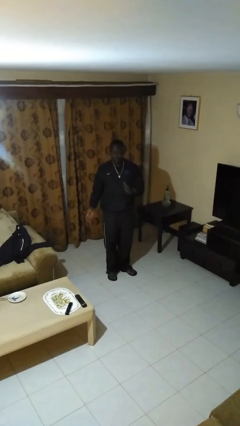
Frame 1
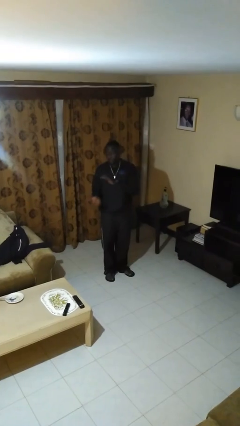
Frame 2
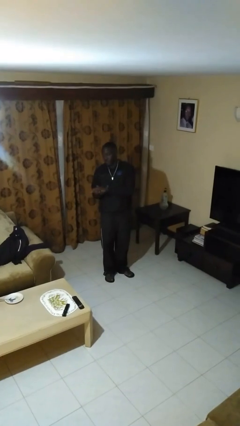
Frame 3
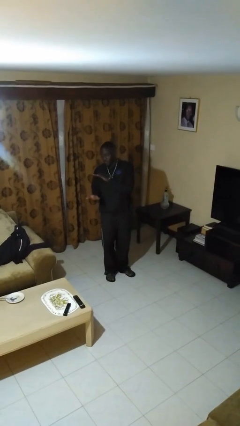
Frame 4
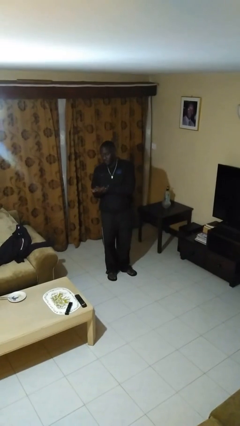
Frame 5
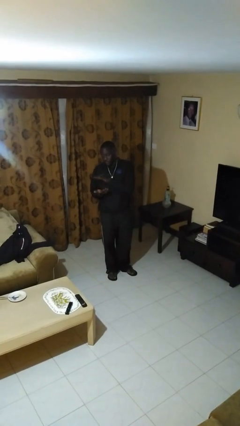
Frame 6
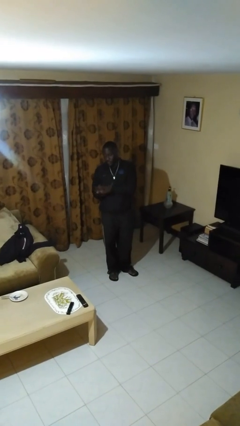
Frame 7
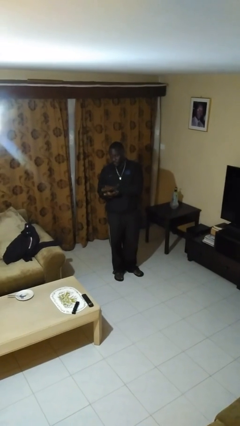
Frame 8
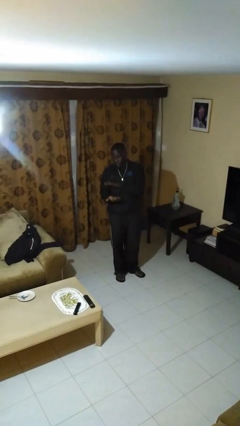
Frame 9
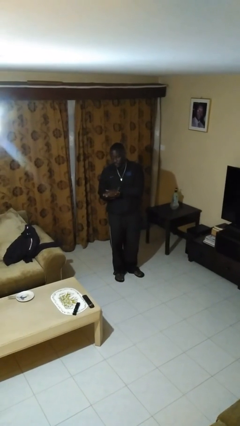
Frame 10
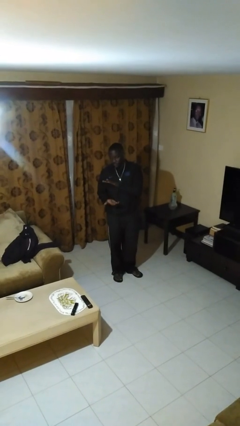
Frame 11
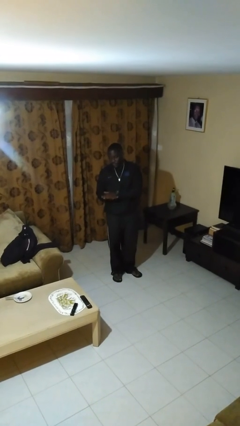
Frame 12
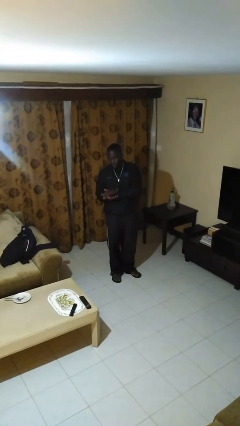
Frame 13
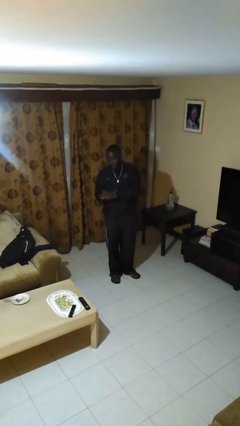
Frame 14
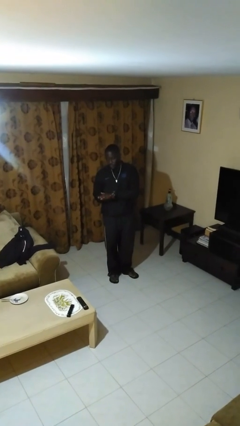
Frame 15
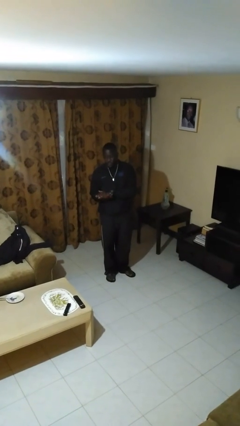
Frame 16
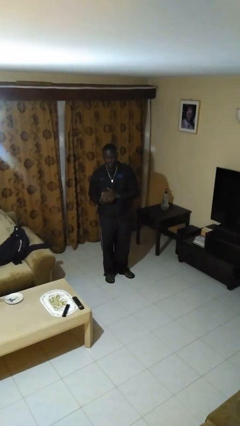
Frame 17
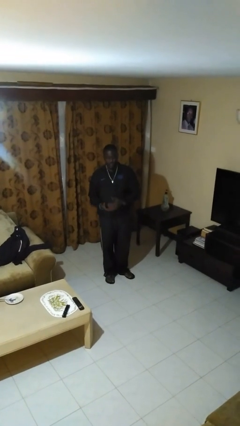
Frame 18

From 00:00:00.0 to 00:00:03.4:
person claps hands

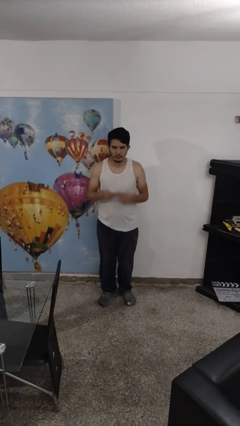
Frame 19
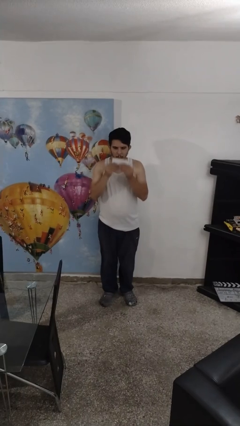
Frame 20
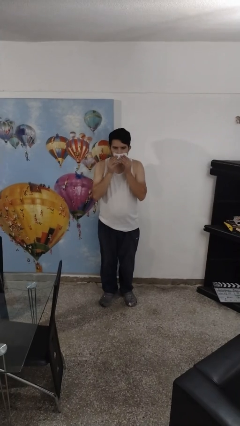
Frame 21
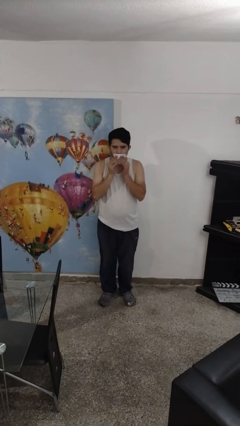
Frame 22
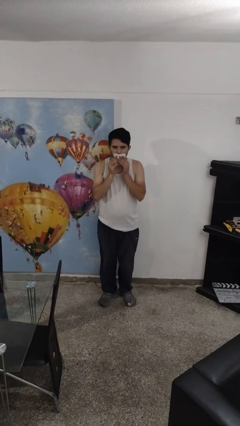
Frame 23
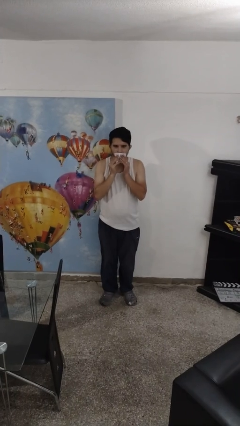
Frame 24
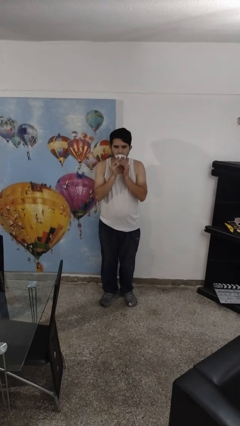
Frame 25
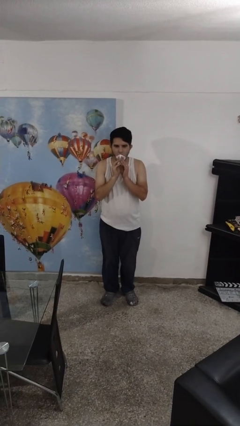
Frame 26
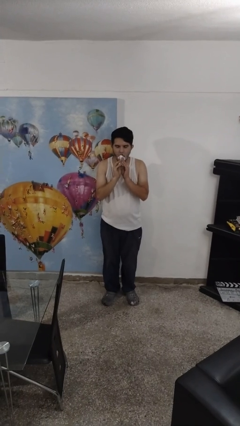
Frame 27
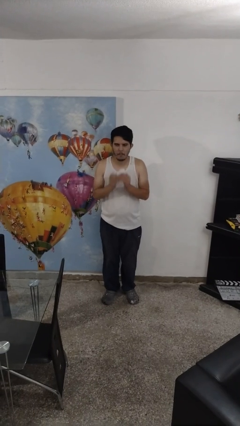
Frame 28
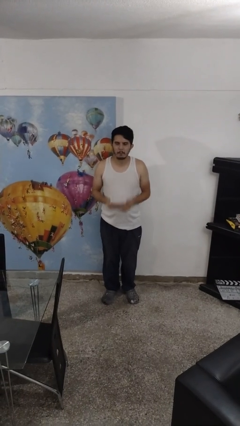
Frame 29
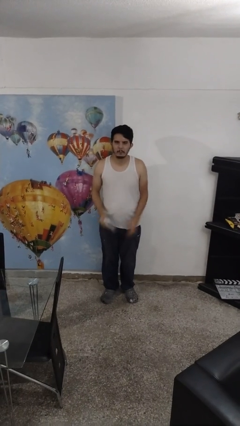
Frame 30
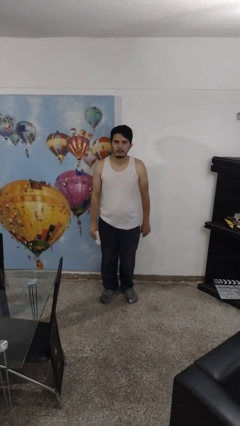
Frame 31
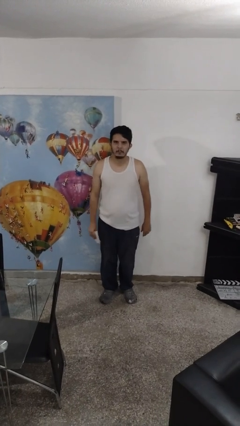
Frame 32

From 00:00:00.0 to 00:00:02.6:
person wipes mouth with napkin

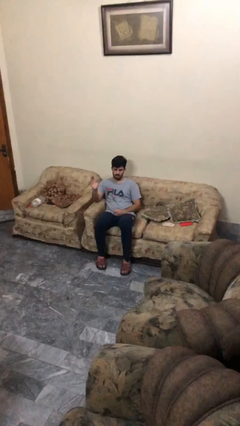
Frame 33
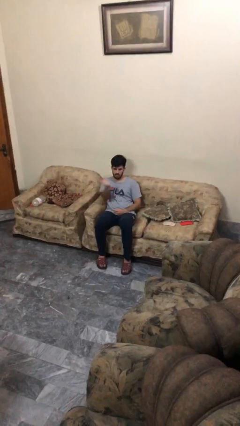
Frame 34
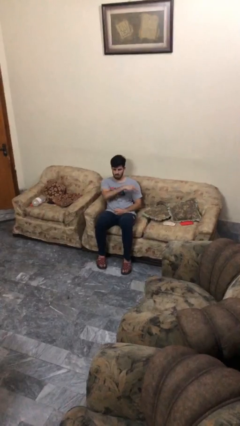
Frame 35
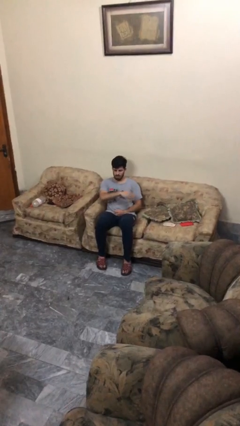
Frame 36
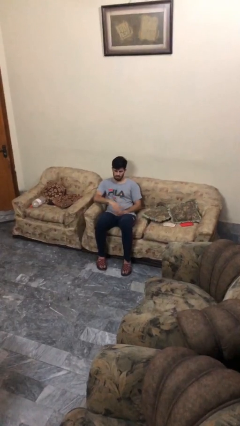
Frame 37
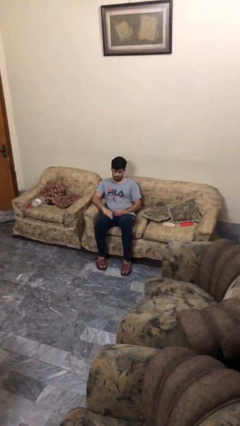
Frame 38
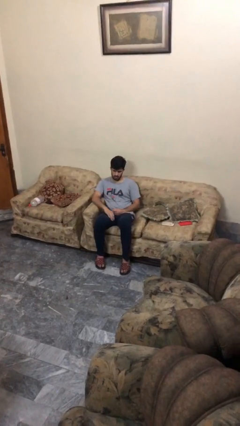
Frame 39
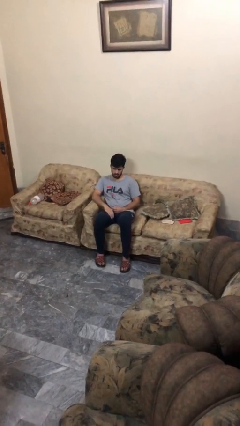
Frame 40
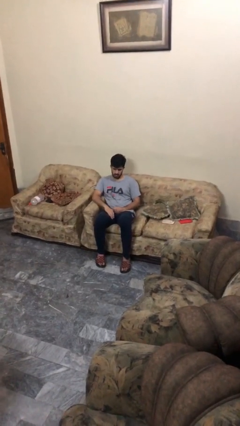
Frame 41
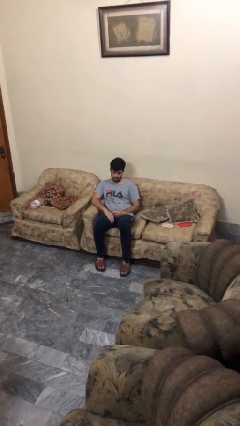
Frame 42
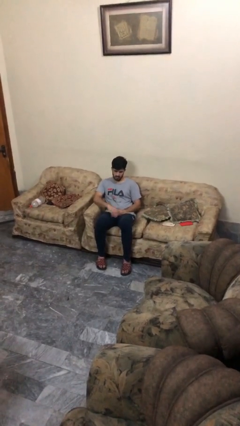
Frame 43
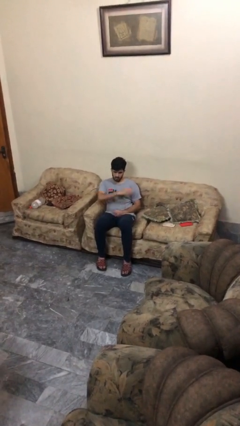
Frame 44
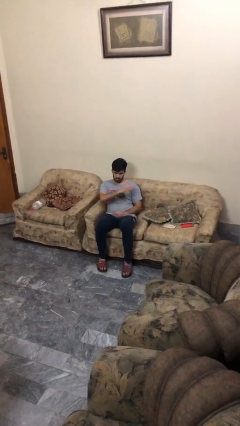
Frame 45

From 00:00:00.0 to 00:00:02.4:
person gestures swipe left

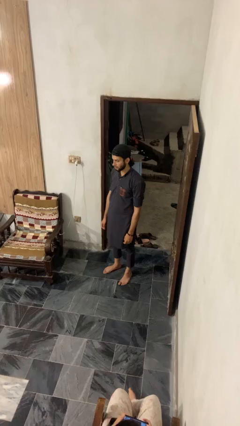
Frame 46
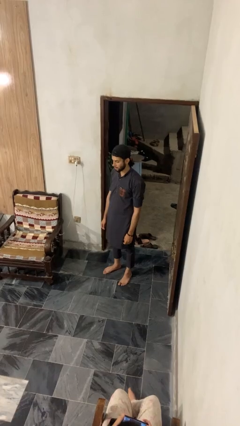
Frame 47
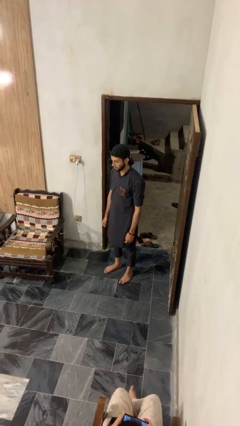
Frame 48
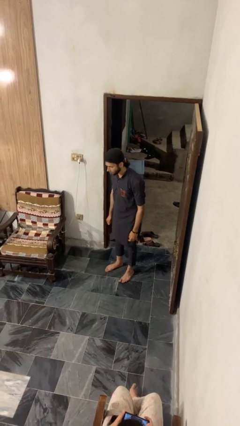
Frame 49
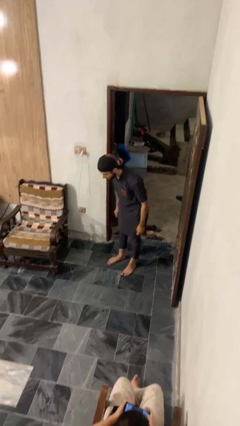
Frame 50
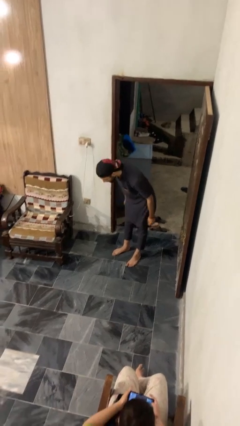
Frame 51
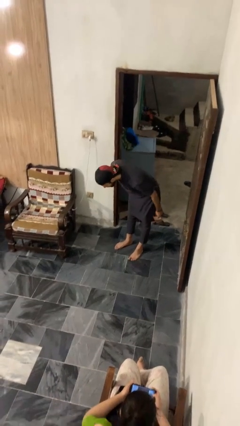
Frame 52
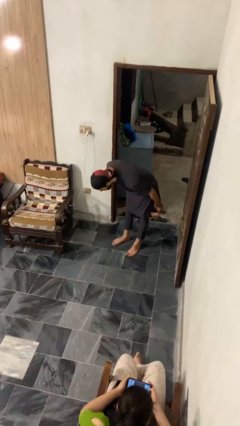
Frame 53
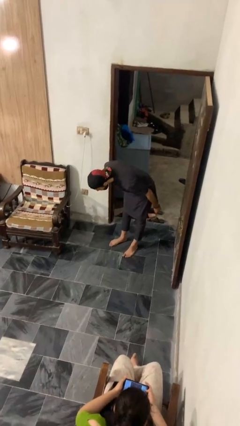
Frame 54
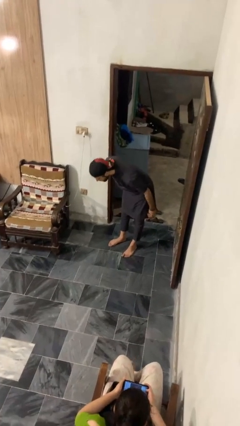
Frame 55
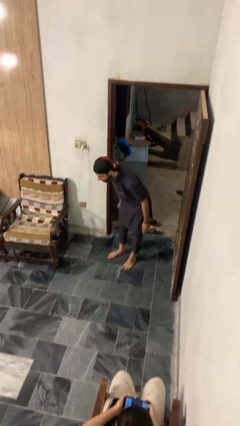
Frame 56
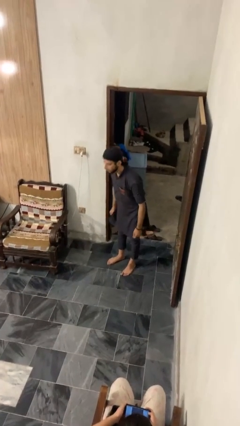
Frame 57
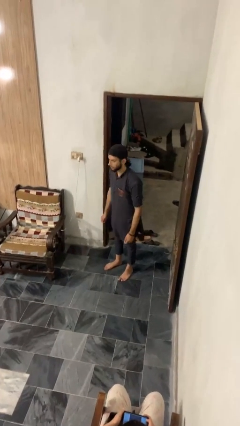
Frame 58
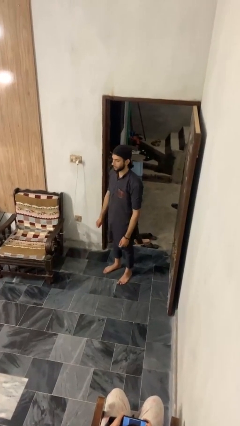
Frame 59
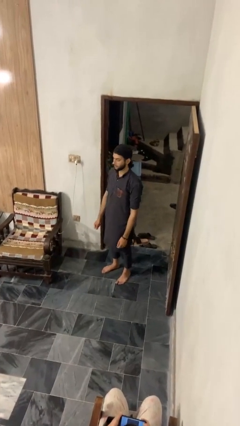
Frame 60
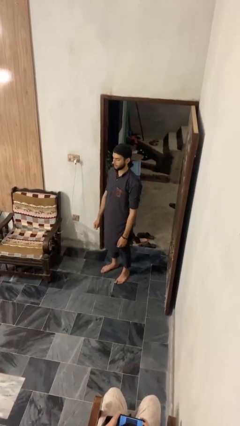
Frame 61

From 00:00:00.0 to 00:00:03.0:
person bows

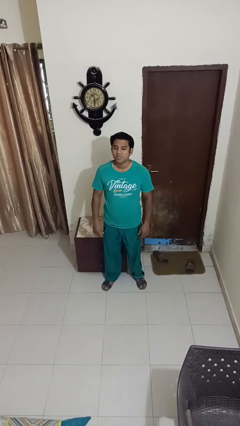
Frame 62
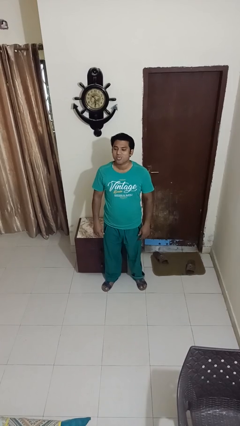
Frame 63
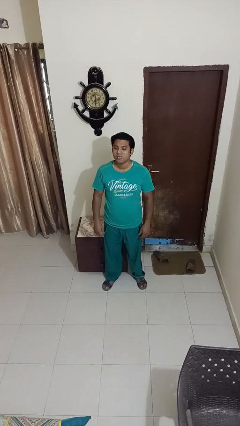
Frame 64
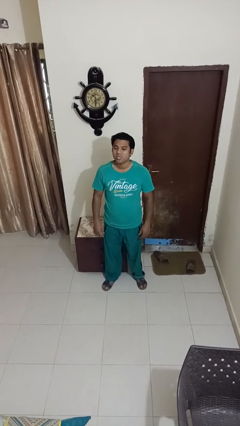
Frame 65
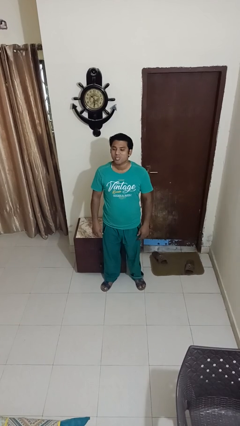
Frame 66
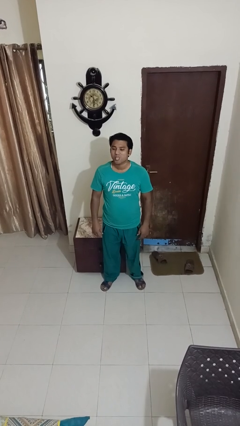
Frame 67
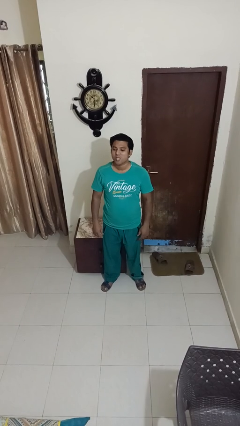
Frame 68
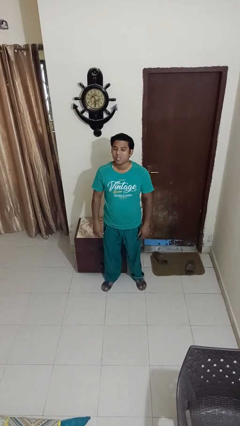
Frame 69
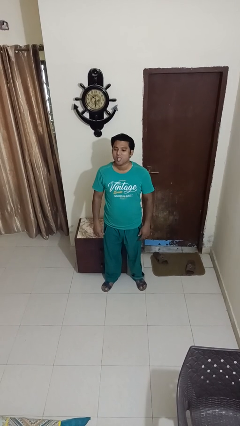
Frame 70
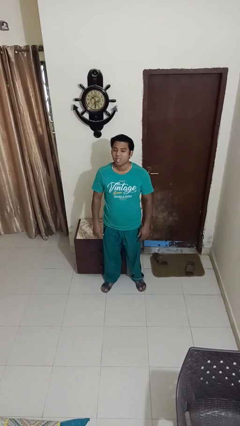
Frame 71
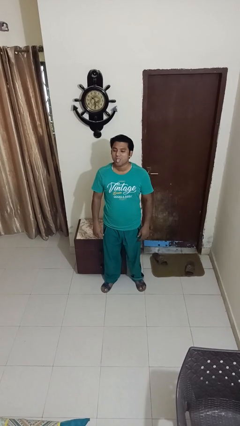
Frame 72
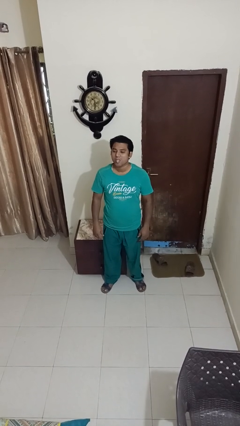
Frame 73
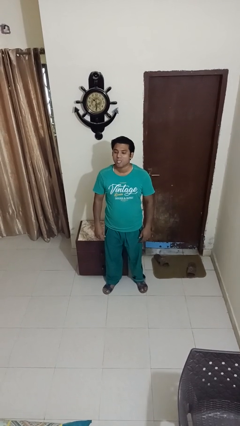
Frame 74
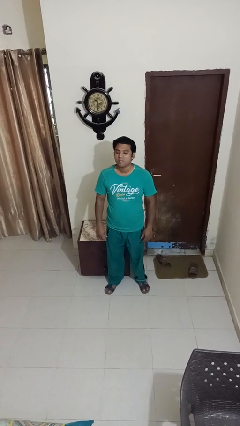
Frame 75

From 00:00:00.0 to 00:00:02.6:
person sticks out tongue

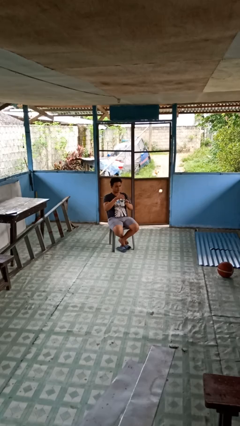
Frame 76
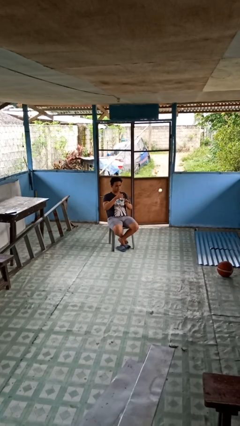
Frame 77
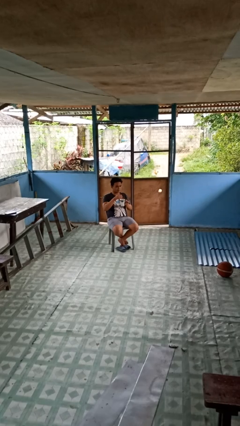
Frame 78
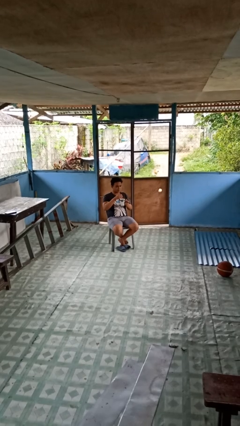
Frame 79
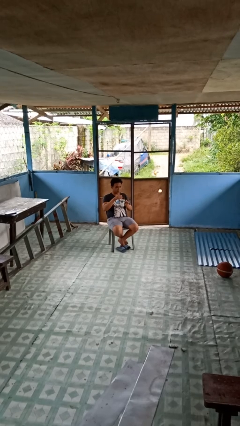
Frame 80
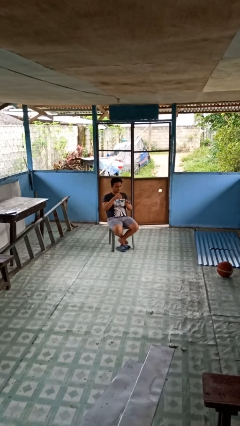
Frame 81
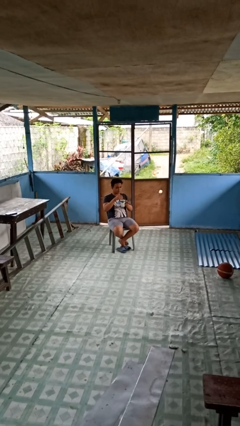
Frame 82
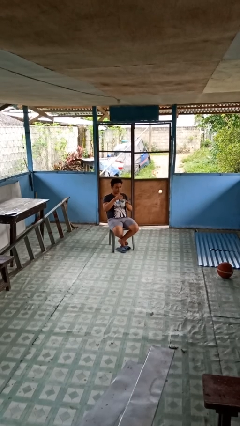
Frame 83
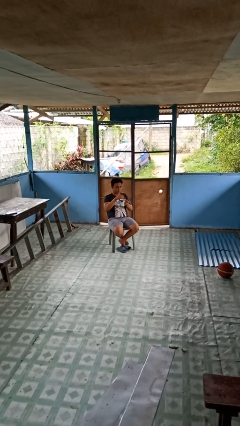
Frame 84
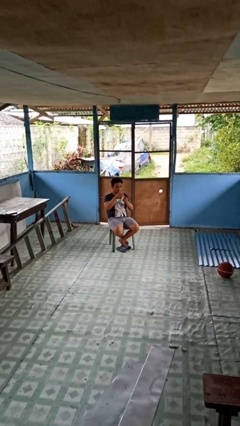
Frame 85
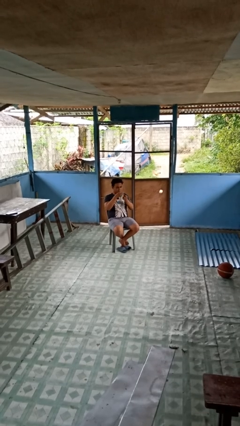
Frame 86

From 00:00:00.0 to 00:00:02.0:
person stirs mug

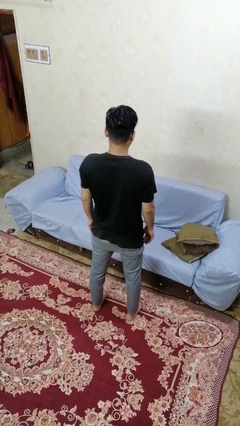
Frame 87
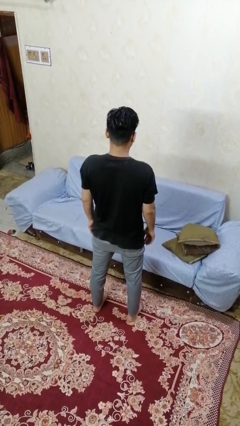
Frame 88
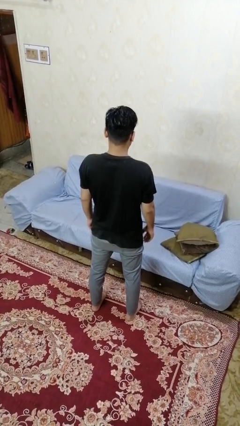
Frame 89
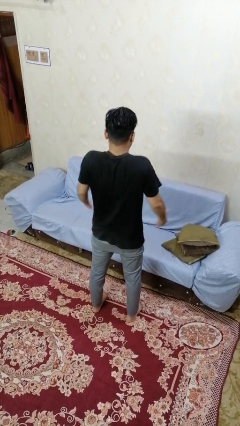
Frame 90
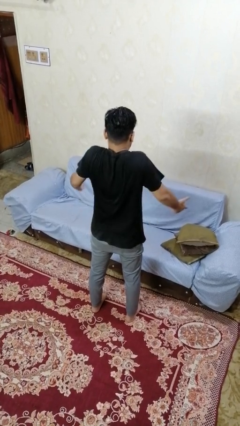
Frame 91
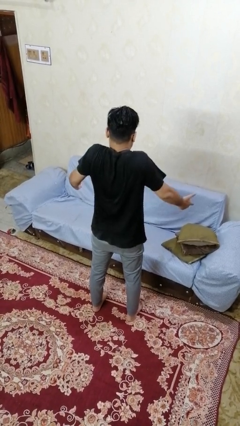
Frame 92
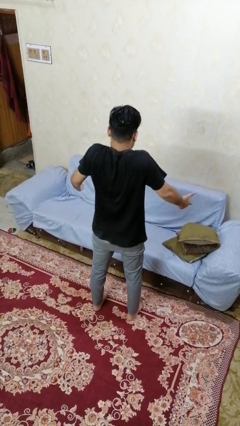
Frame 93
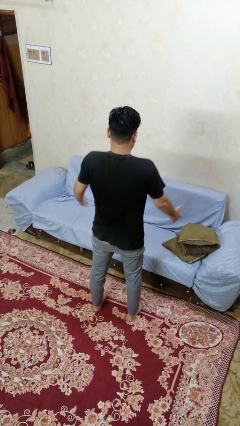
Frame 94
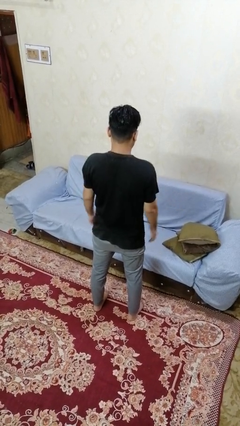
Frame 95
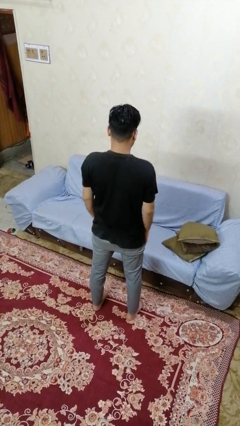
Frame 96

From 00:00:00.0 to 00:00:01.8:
person shrugs
